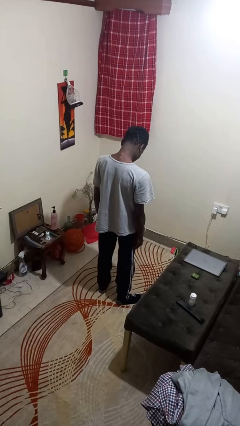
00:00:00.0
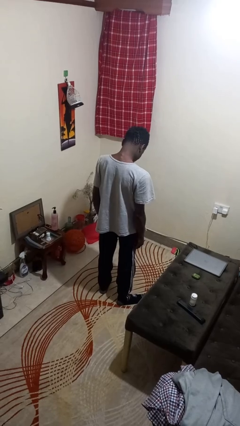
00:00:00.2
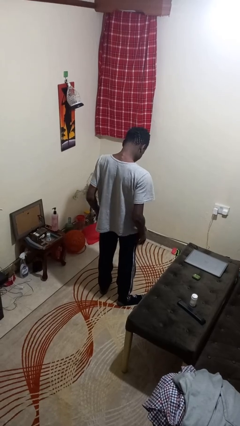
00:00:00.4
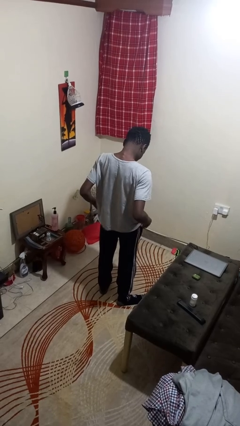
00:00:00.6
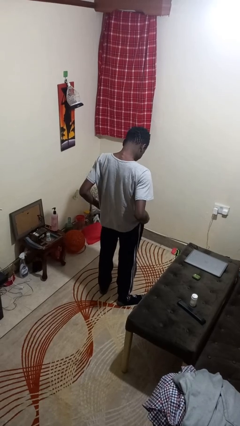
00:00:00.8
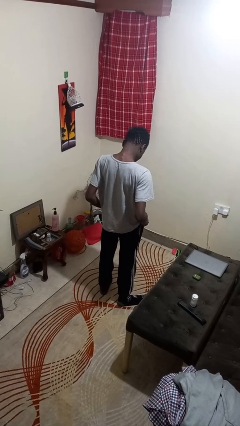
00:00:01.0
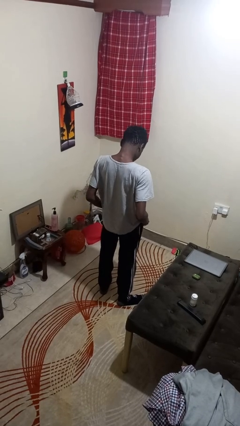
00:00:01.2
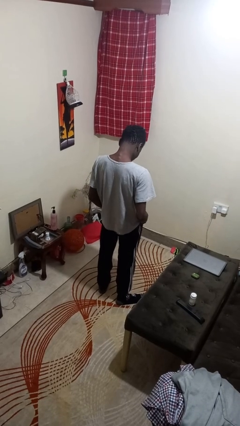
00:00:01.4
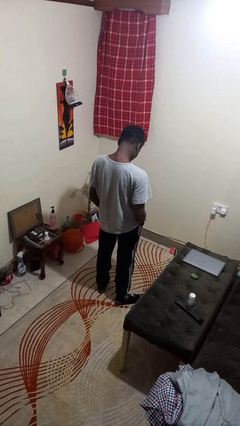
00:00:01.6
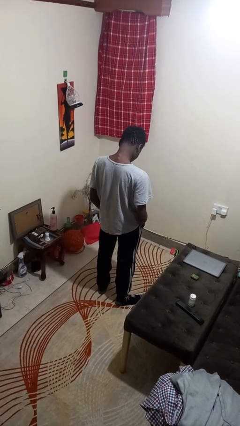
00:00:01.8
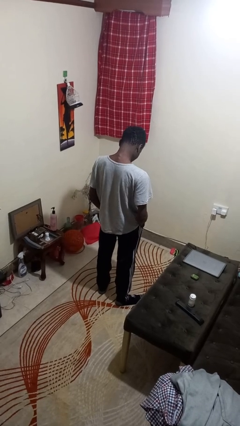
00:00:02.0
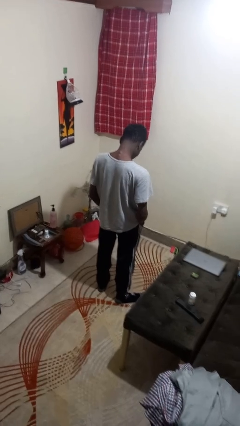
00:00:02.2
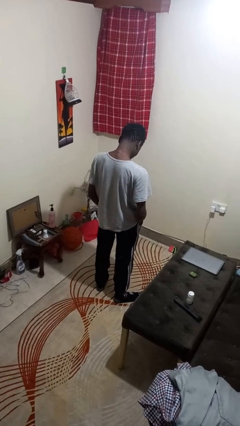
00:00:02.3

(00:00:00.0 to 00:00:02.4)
person puts hands in back pockets

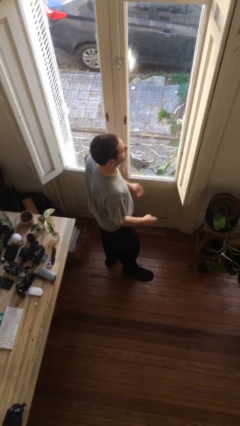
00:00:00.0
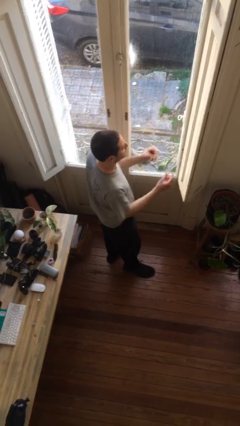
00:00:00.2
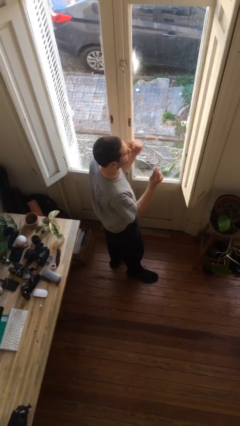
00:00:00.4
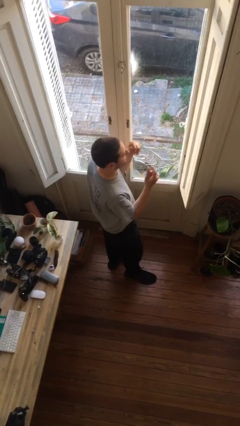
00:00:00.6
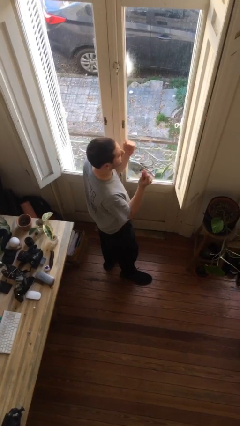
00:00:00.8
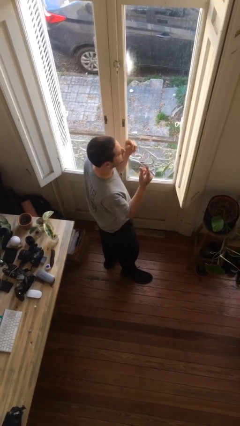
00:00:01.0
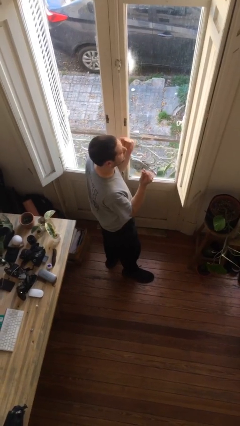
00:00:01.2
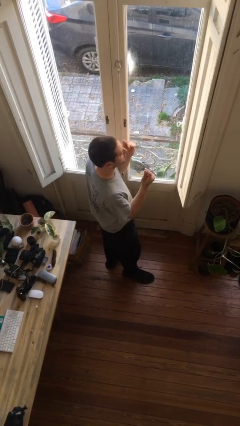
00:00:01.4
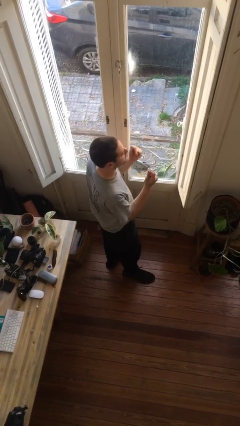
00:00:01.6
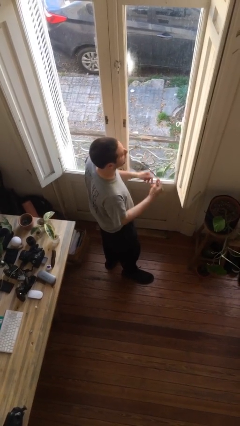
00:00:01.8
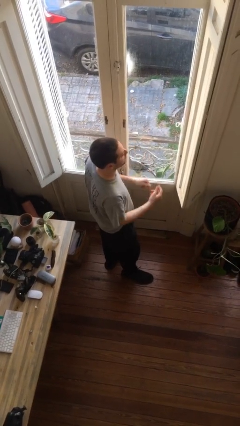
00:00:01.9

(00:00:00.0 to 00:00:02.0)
person snaps fingers

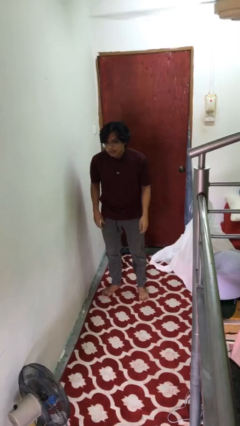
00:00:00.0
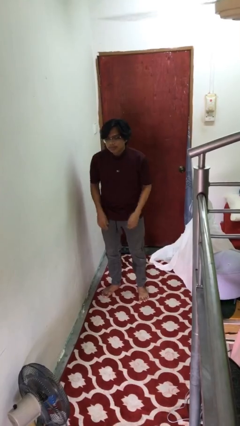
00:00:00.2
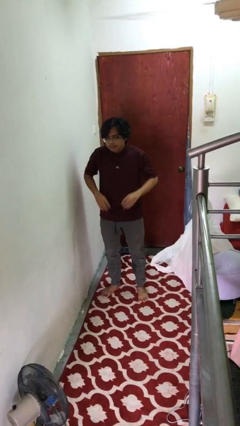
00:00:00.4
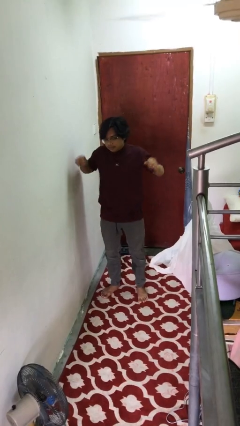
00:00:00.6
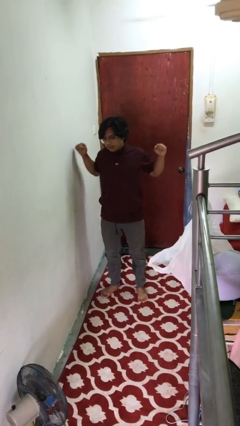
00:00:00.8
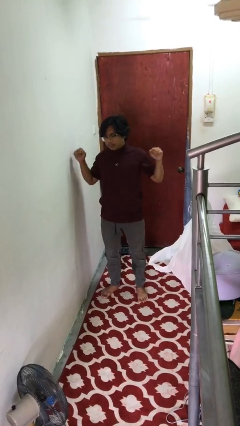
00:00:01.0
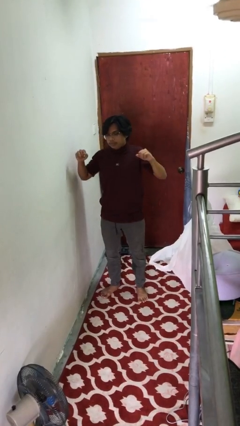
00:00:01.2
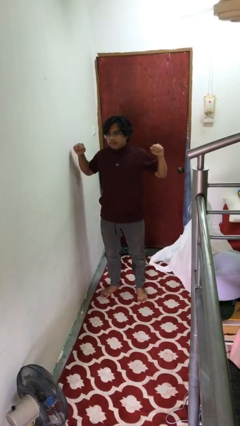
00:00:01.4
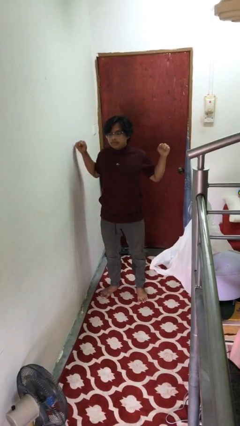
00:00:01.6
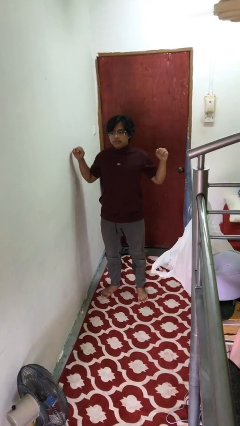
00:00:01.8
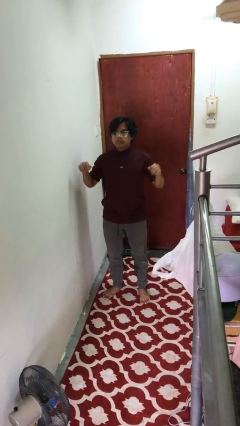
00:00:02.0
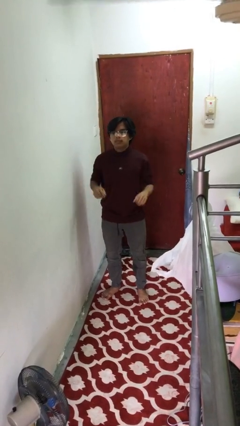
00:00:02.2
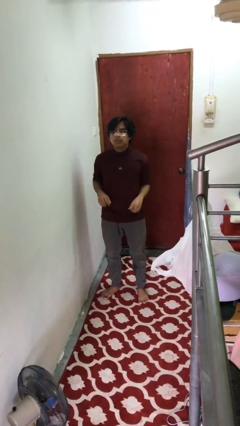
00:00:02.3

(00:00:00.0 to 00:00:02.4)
person stretches arms to side

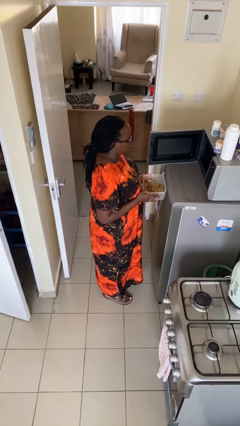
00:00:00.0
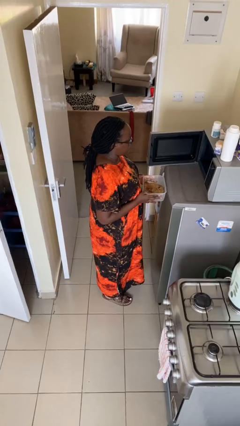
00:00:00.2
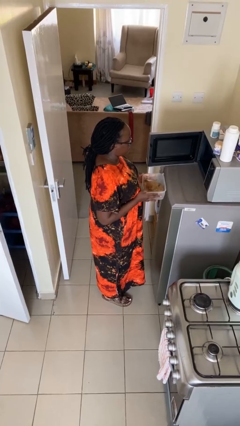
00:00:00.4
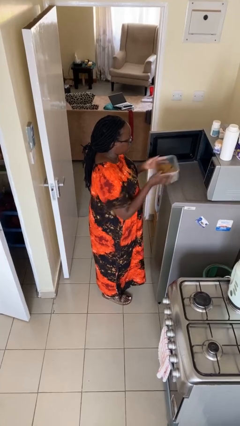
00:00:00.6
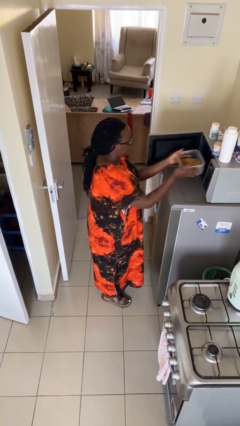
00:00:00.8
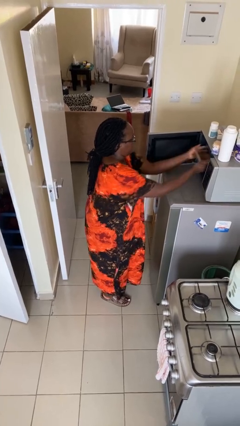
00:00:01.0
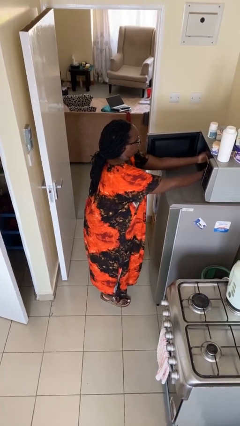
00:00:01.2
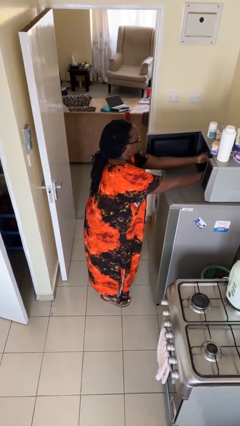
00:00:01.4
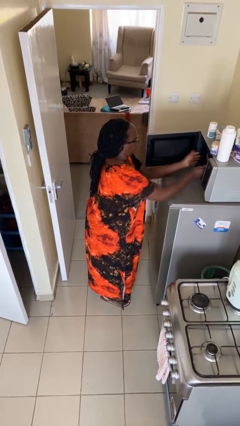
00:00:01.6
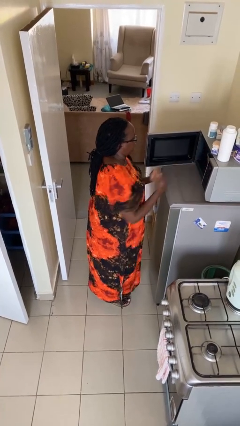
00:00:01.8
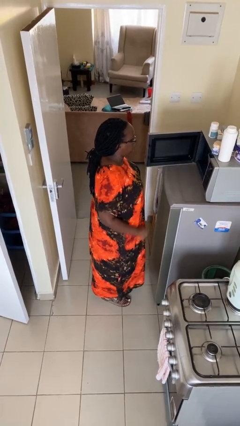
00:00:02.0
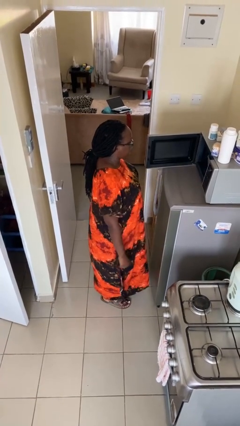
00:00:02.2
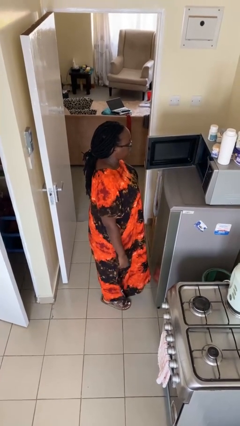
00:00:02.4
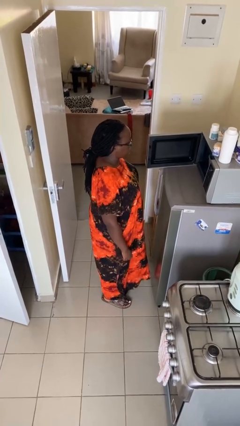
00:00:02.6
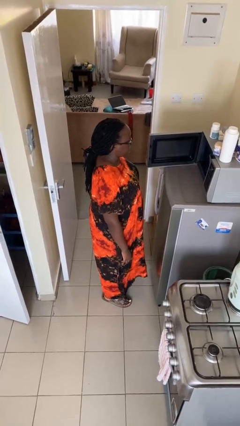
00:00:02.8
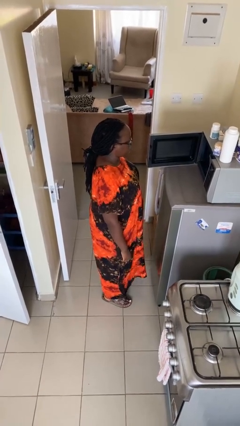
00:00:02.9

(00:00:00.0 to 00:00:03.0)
person puts object into microwave

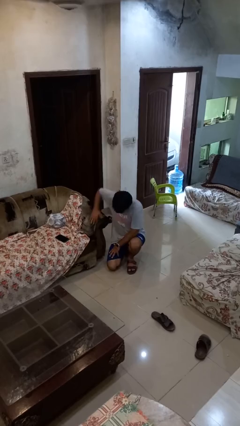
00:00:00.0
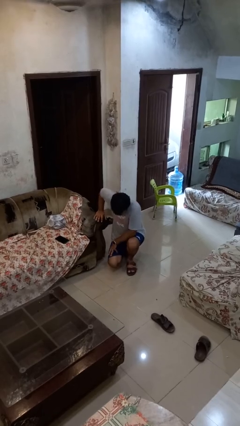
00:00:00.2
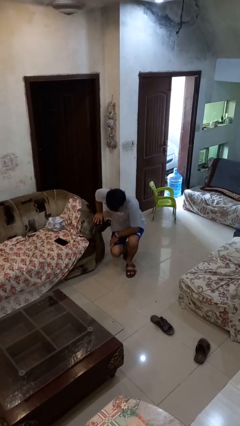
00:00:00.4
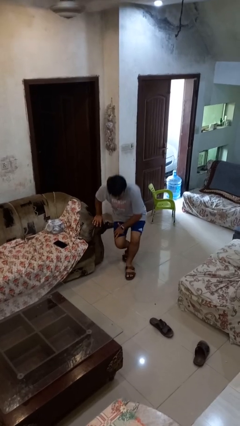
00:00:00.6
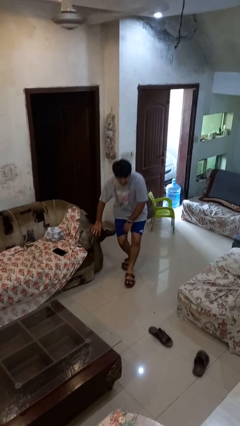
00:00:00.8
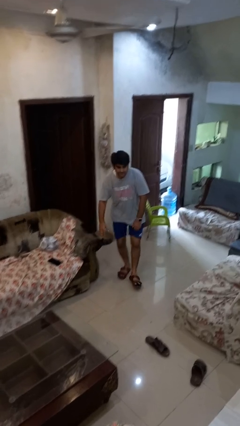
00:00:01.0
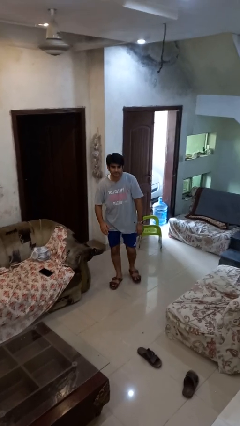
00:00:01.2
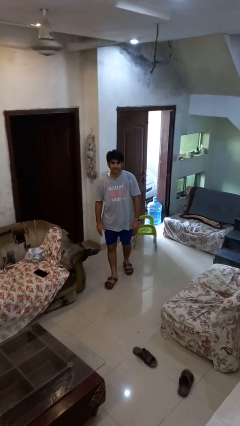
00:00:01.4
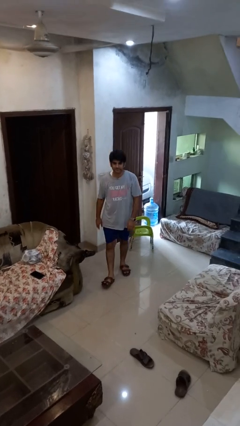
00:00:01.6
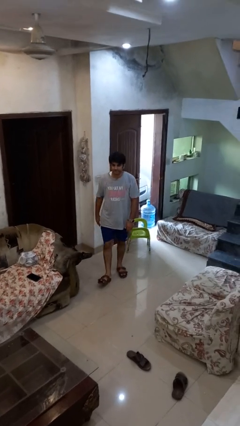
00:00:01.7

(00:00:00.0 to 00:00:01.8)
person stands up from floor

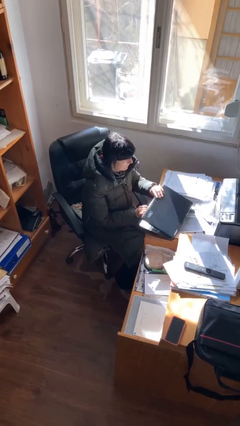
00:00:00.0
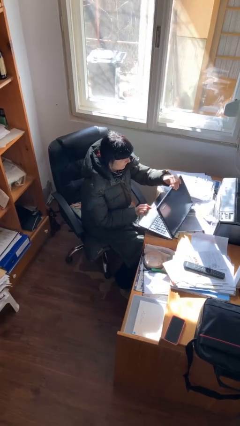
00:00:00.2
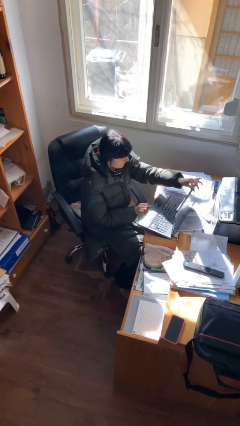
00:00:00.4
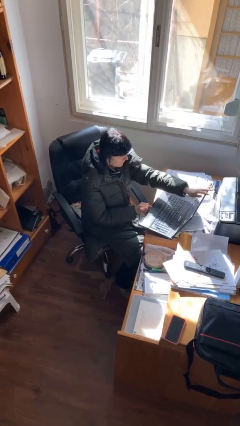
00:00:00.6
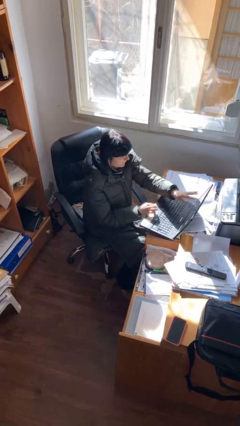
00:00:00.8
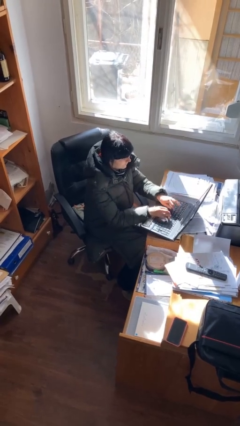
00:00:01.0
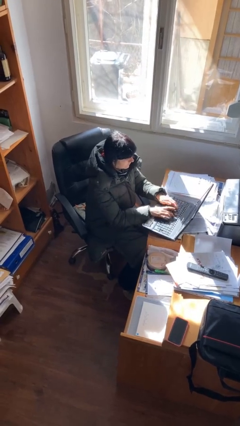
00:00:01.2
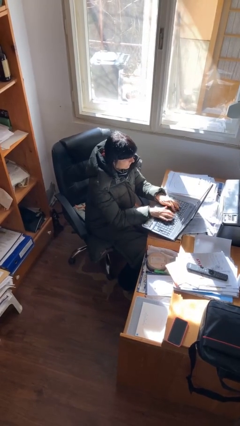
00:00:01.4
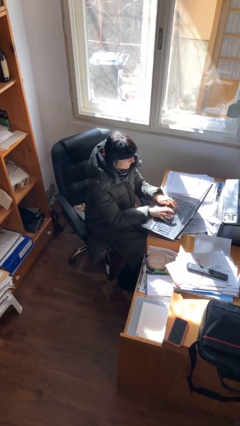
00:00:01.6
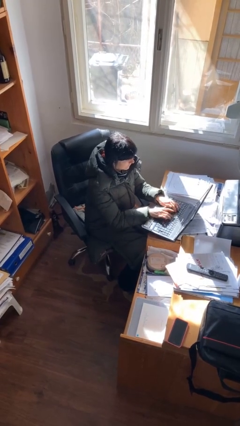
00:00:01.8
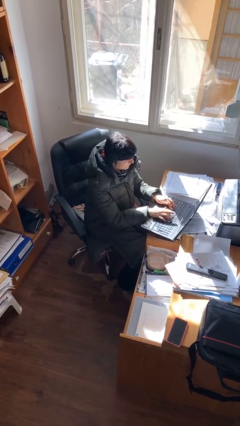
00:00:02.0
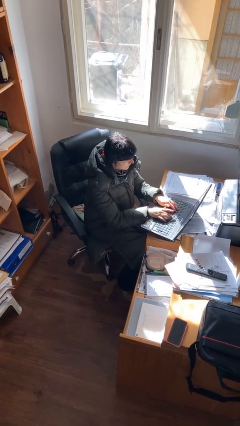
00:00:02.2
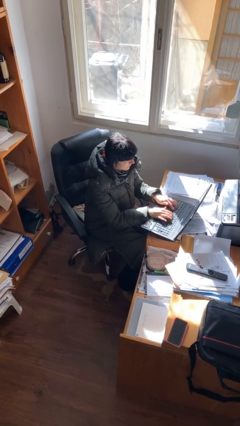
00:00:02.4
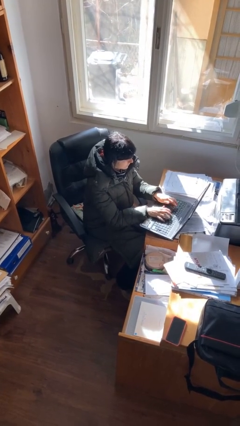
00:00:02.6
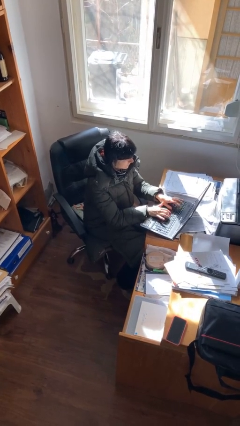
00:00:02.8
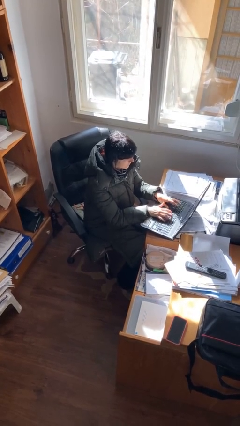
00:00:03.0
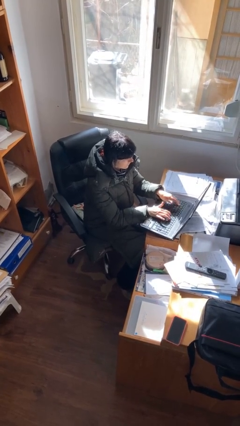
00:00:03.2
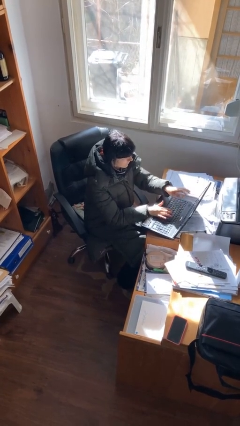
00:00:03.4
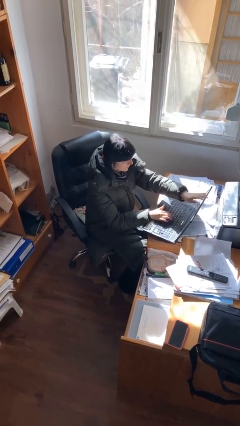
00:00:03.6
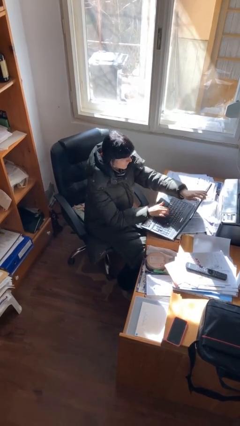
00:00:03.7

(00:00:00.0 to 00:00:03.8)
person interacts with laptop

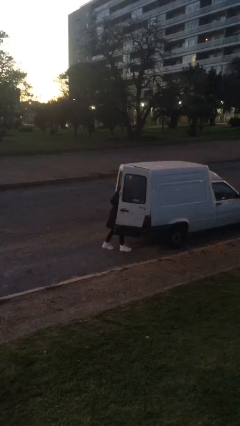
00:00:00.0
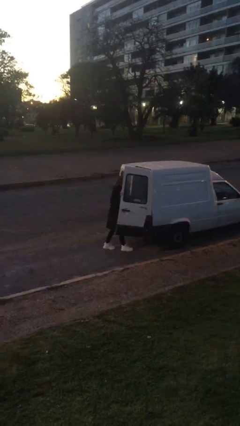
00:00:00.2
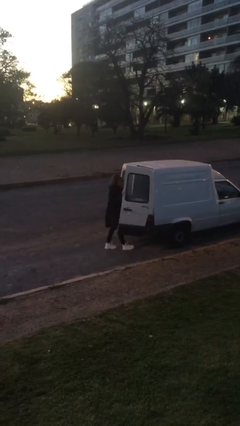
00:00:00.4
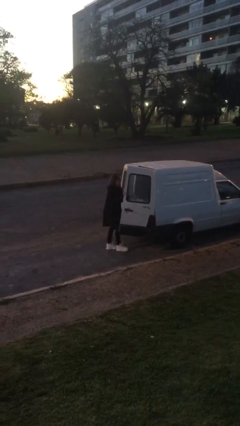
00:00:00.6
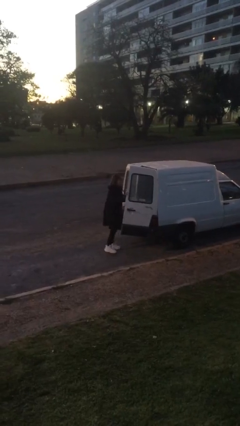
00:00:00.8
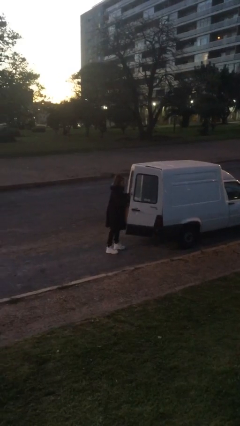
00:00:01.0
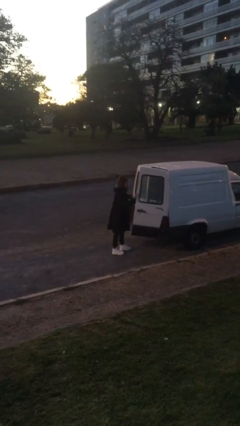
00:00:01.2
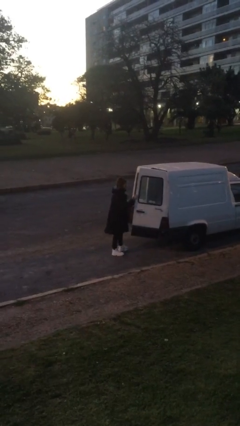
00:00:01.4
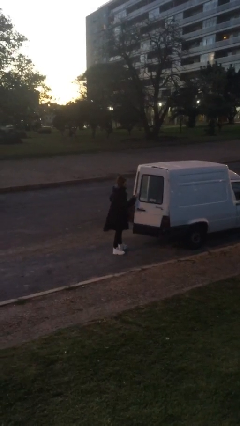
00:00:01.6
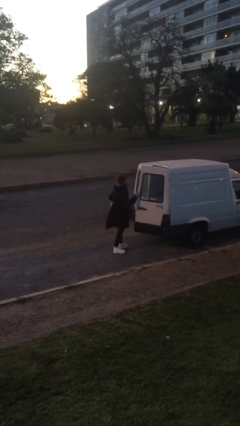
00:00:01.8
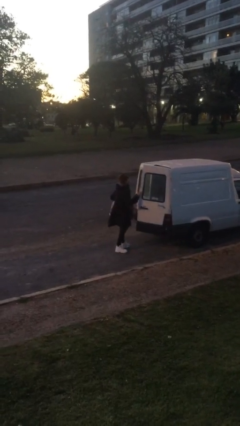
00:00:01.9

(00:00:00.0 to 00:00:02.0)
person unloads car
